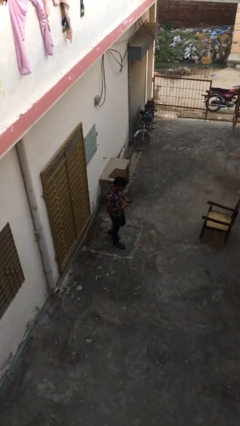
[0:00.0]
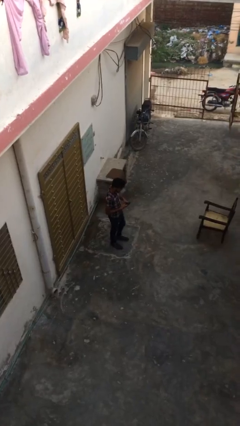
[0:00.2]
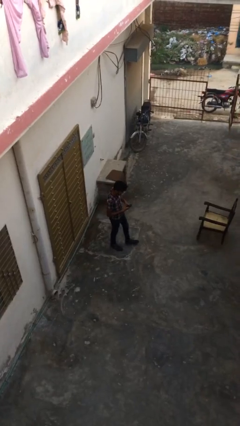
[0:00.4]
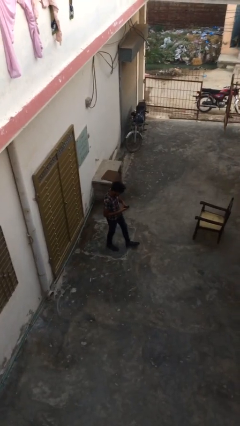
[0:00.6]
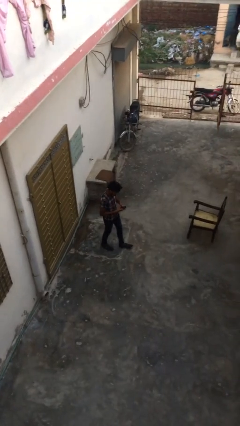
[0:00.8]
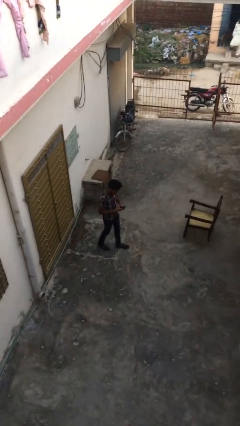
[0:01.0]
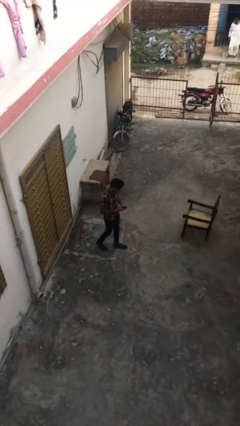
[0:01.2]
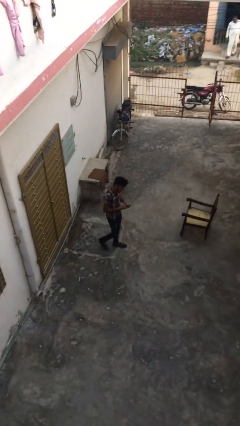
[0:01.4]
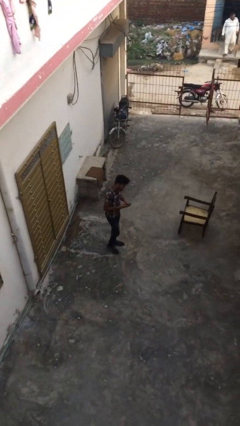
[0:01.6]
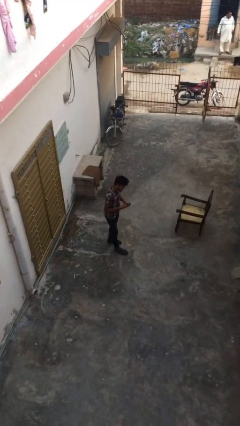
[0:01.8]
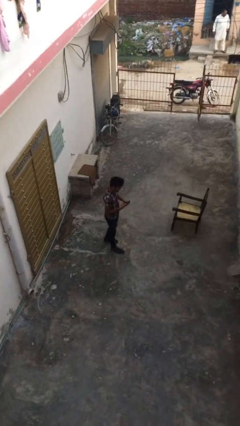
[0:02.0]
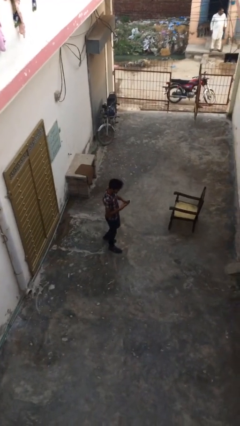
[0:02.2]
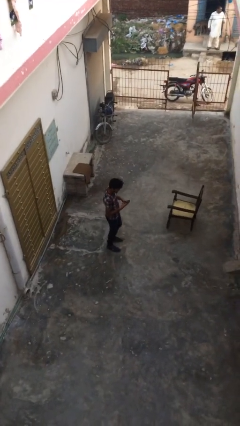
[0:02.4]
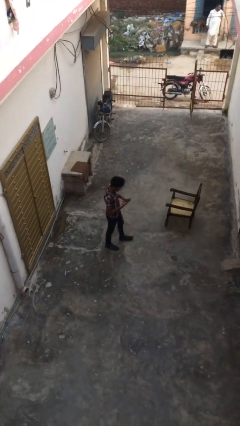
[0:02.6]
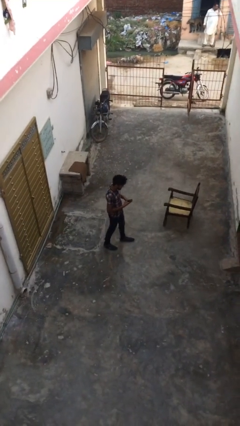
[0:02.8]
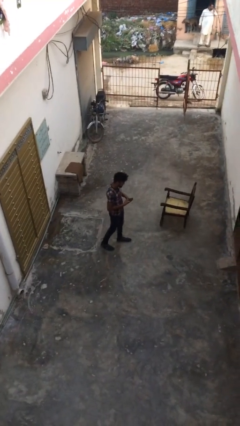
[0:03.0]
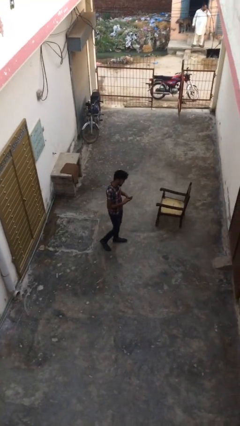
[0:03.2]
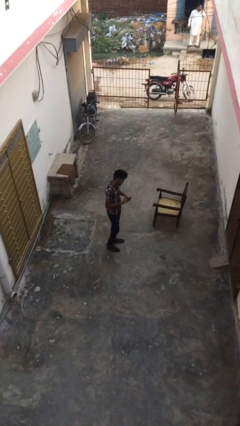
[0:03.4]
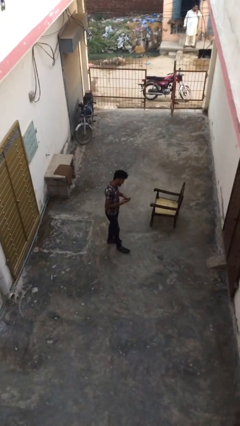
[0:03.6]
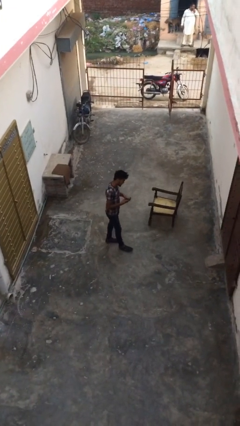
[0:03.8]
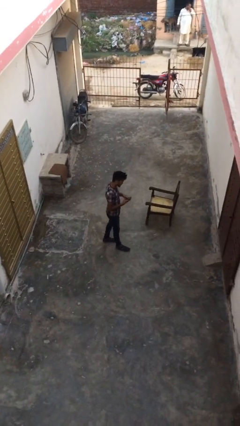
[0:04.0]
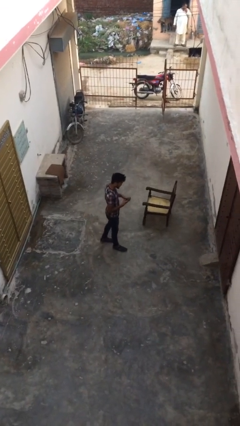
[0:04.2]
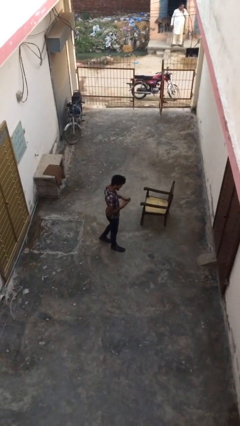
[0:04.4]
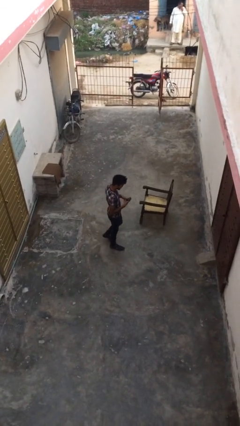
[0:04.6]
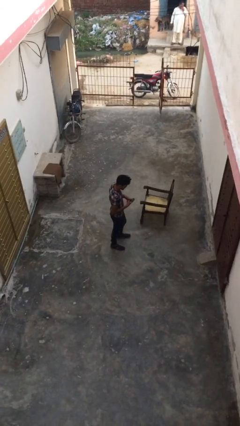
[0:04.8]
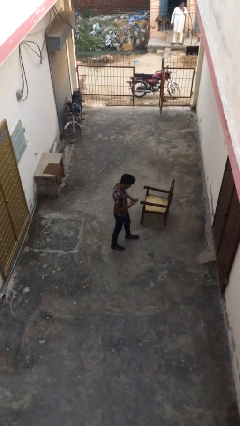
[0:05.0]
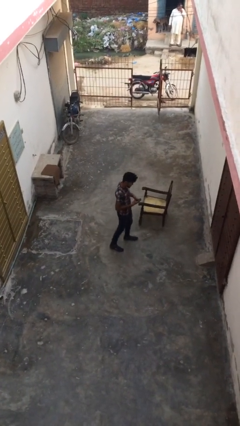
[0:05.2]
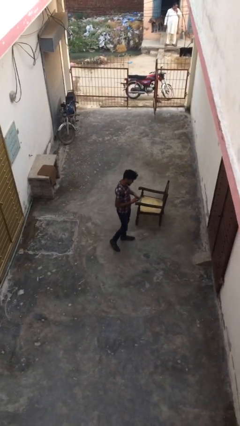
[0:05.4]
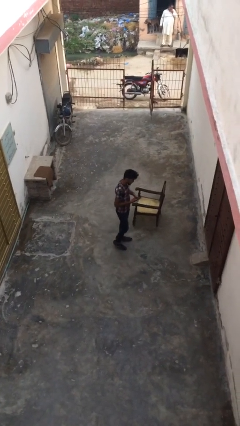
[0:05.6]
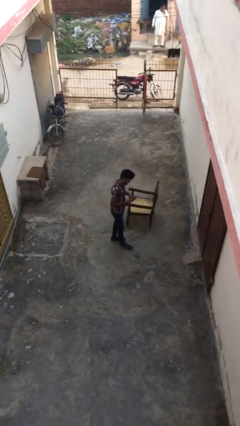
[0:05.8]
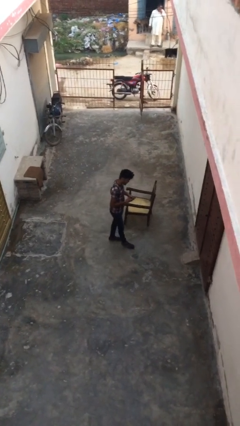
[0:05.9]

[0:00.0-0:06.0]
person texts on phone

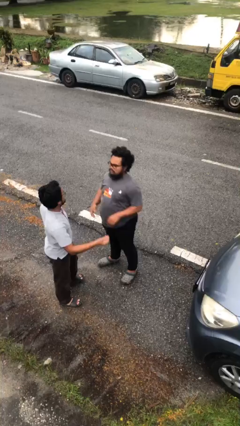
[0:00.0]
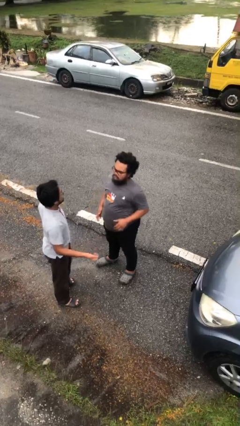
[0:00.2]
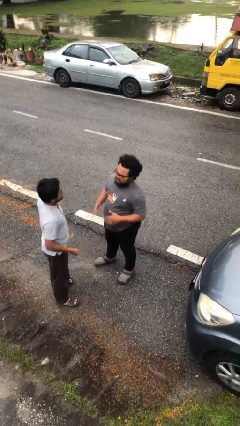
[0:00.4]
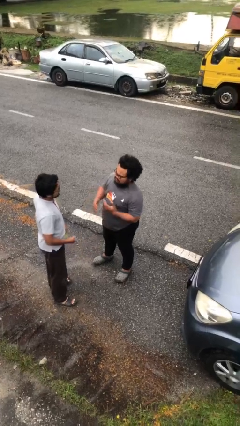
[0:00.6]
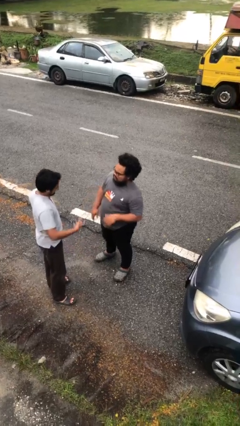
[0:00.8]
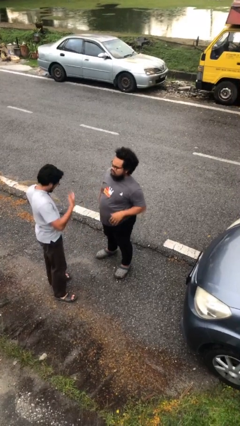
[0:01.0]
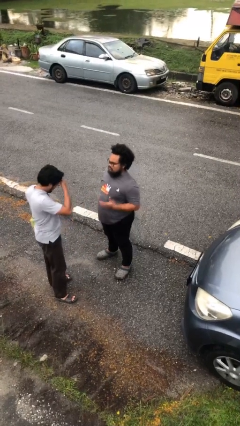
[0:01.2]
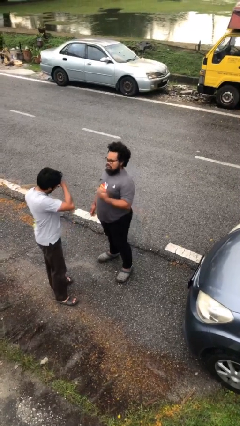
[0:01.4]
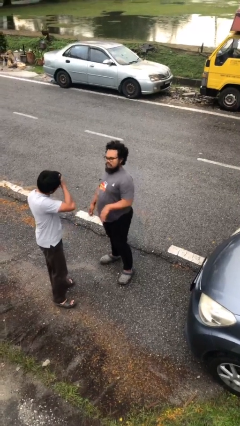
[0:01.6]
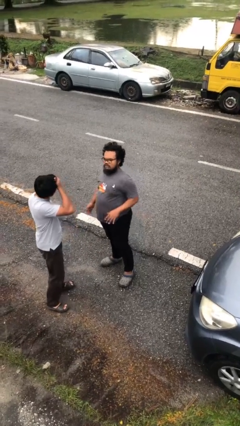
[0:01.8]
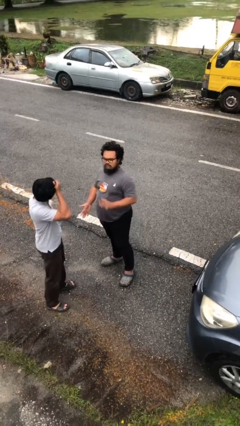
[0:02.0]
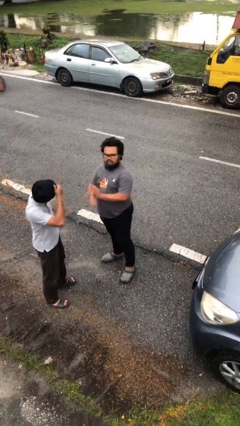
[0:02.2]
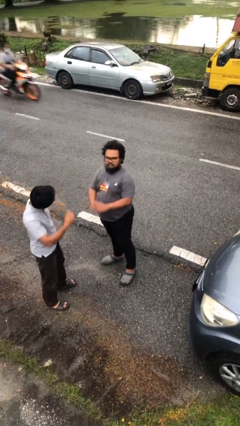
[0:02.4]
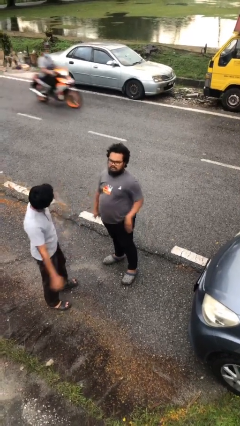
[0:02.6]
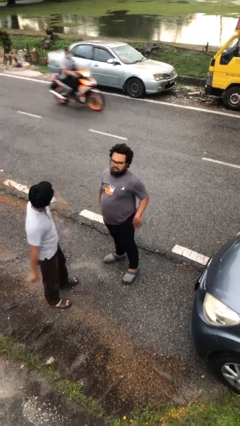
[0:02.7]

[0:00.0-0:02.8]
person talks to person

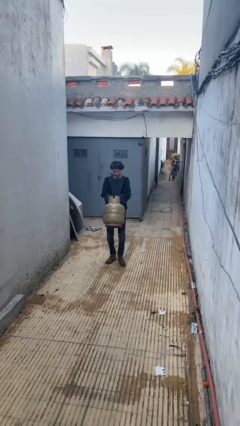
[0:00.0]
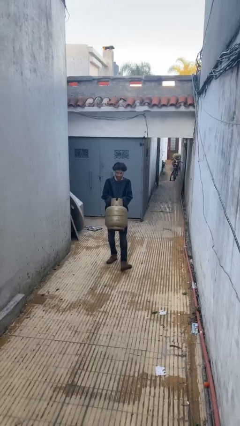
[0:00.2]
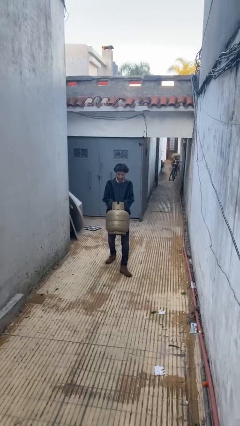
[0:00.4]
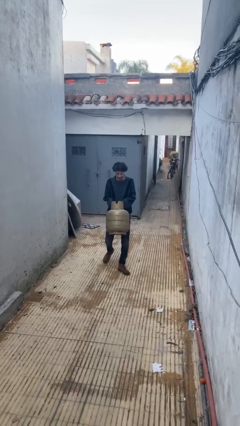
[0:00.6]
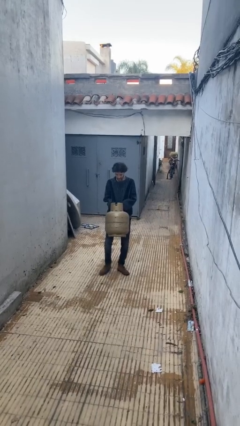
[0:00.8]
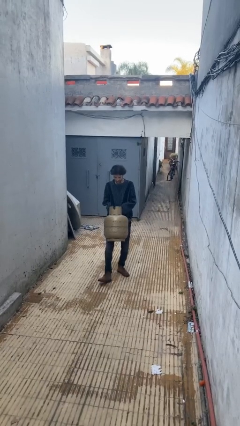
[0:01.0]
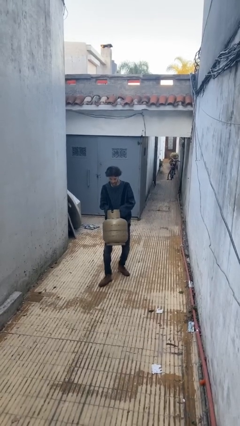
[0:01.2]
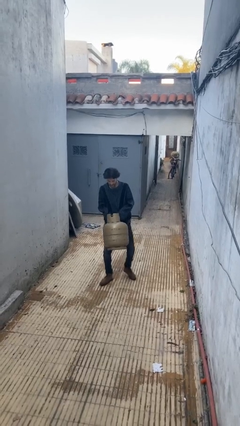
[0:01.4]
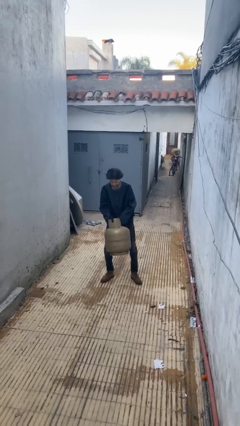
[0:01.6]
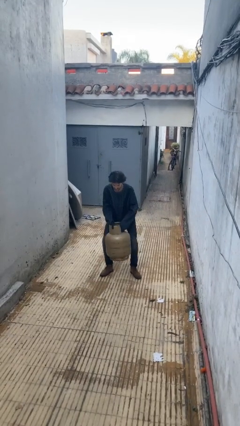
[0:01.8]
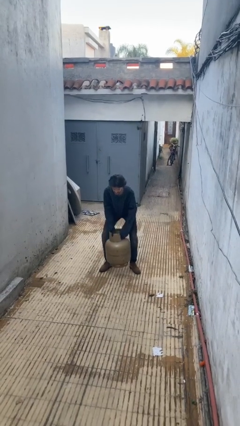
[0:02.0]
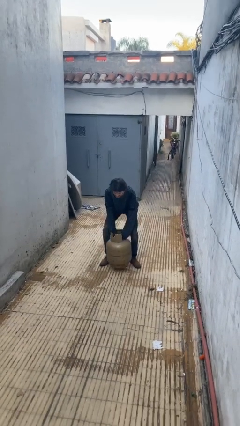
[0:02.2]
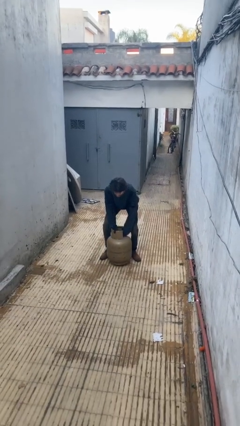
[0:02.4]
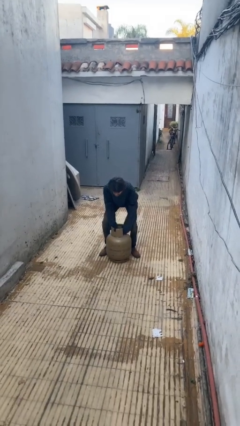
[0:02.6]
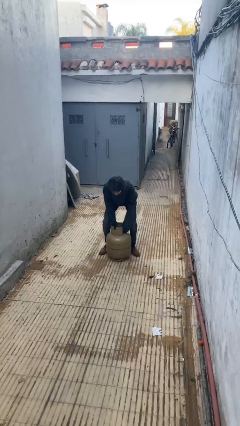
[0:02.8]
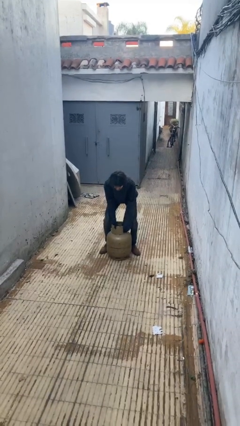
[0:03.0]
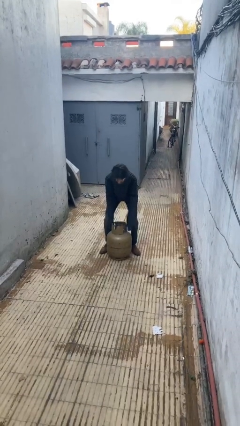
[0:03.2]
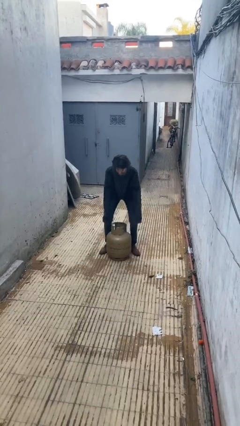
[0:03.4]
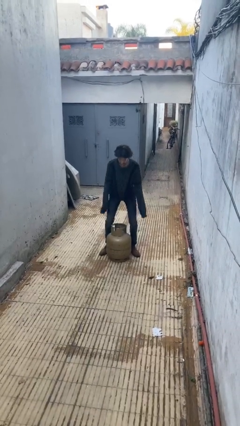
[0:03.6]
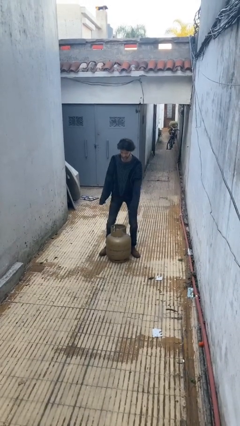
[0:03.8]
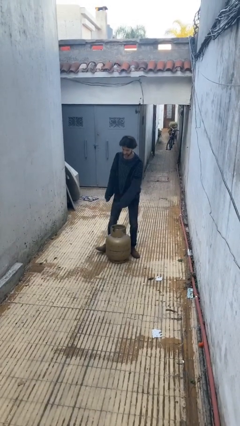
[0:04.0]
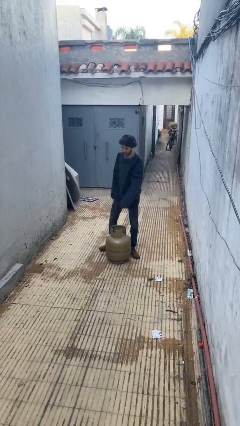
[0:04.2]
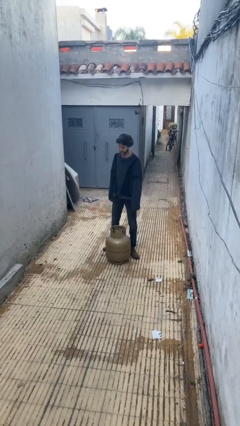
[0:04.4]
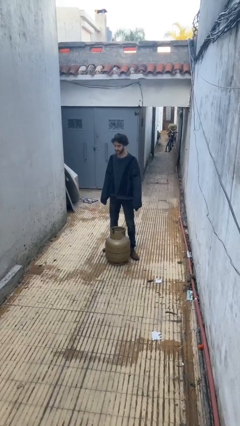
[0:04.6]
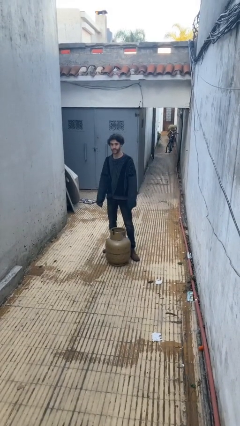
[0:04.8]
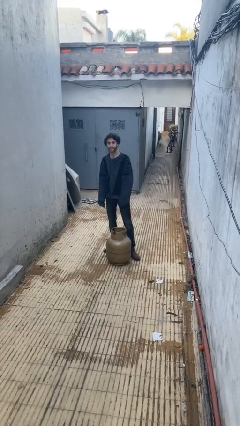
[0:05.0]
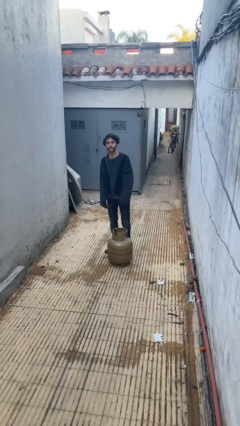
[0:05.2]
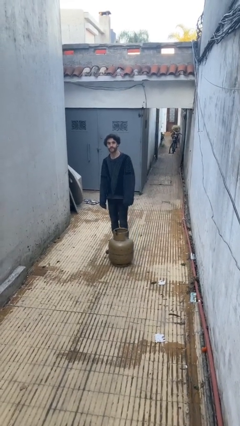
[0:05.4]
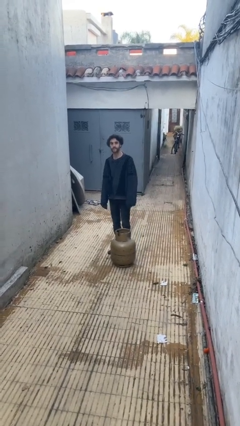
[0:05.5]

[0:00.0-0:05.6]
person puts down object on floor

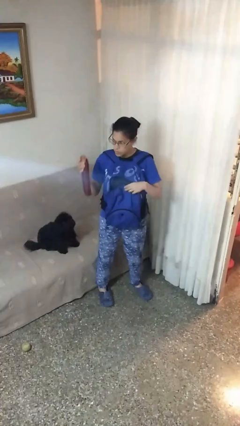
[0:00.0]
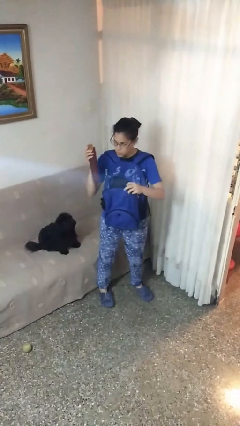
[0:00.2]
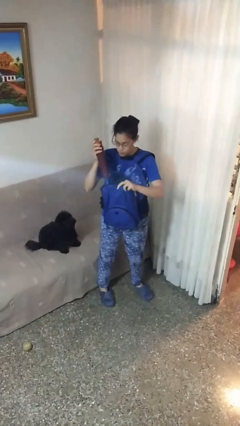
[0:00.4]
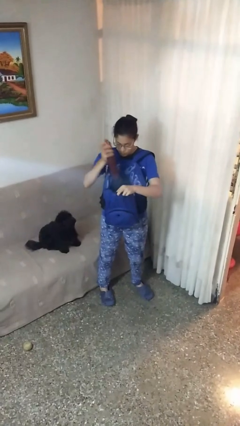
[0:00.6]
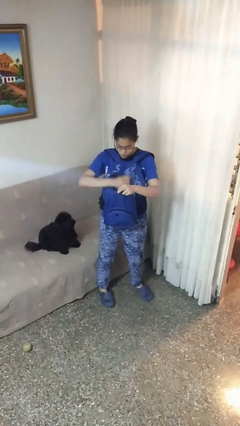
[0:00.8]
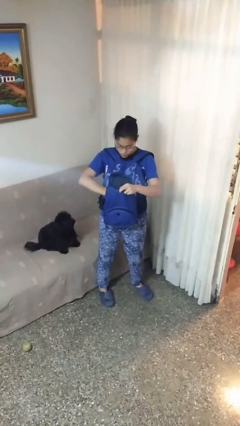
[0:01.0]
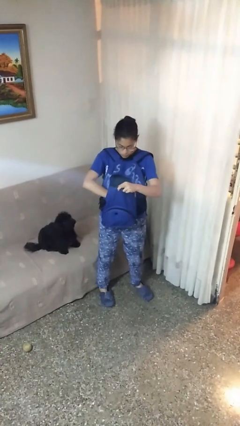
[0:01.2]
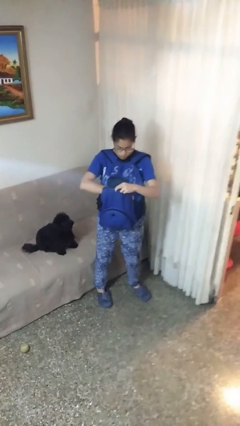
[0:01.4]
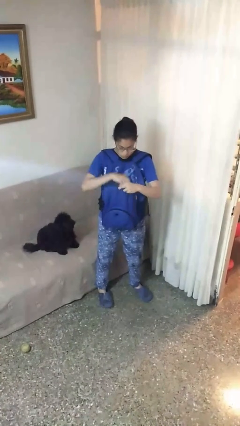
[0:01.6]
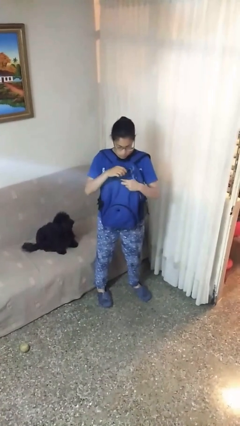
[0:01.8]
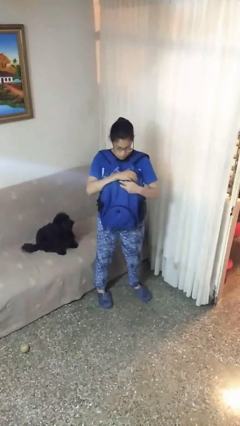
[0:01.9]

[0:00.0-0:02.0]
person puts object into backpack

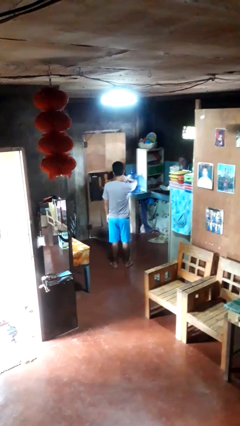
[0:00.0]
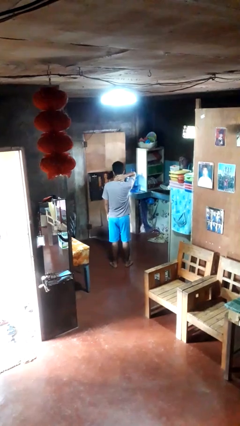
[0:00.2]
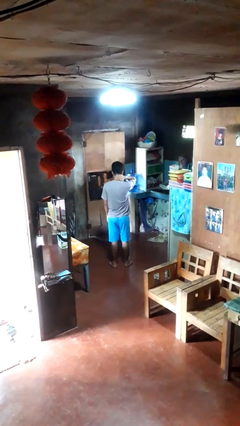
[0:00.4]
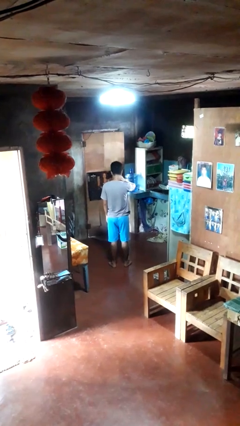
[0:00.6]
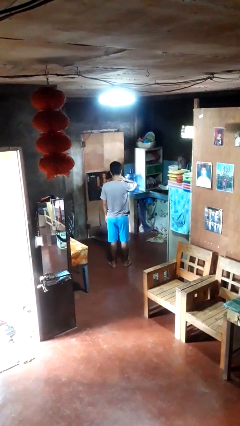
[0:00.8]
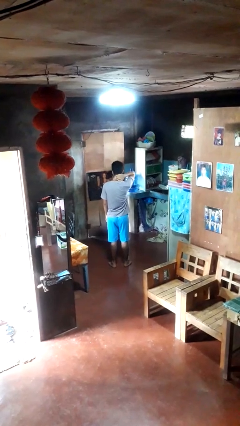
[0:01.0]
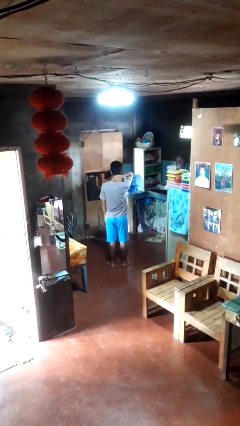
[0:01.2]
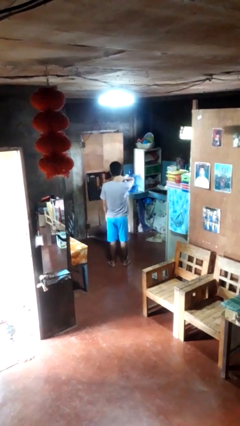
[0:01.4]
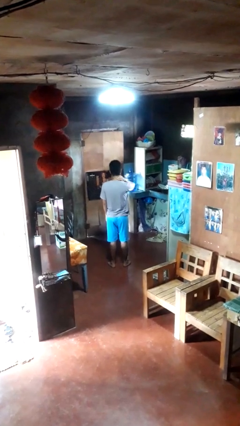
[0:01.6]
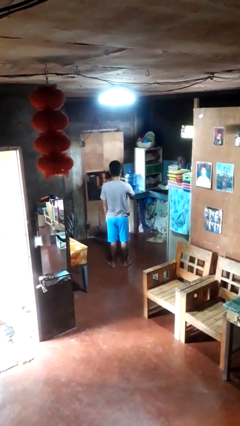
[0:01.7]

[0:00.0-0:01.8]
person rubs neck
